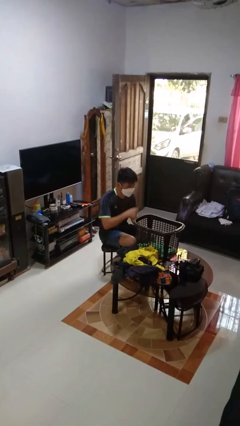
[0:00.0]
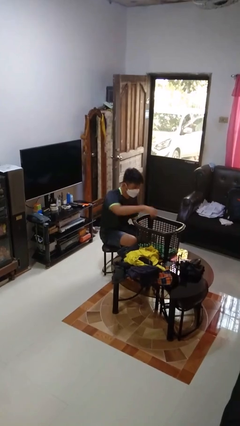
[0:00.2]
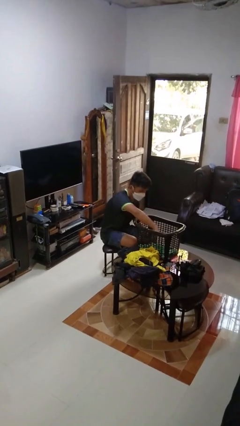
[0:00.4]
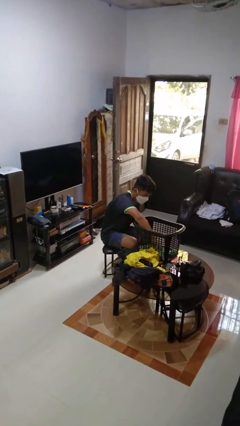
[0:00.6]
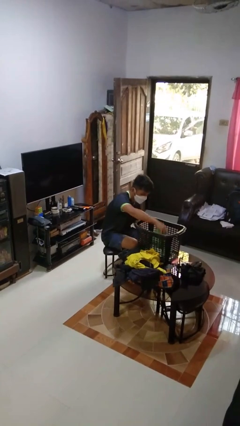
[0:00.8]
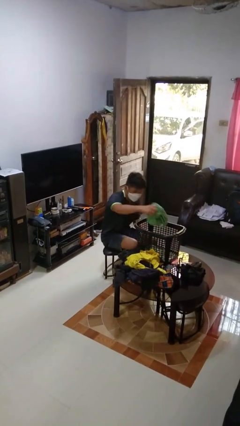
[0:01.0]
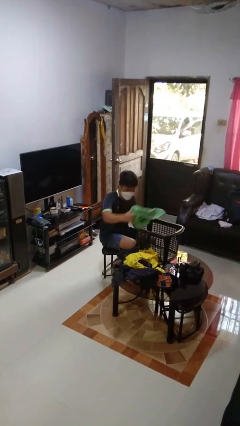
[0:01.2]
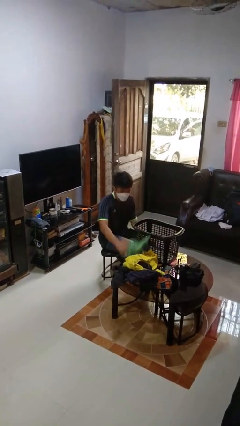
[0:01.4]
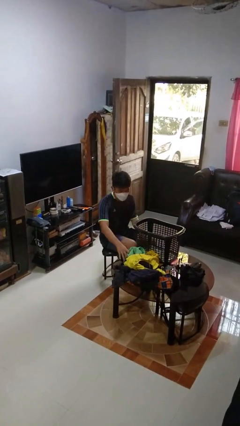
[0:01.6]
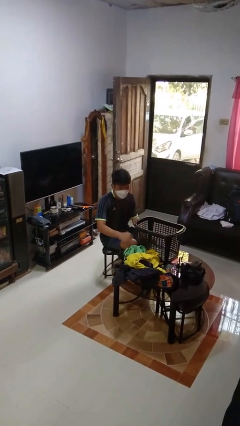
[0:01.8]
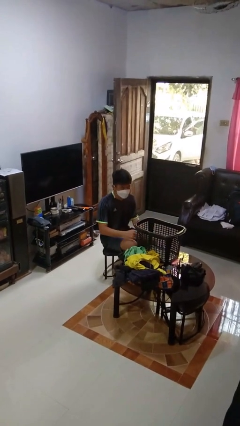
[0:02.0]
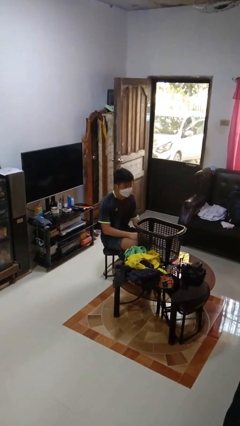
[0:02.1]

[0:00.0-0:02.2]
person takes object from basket

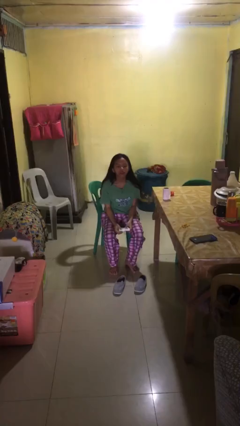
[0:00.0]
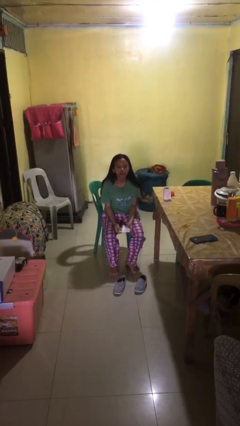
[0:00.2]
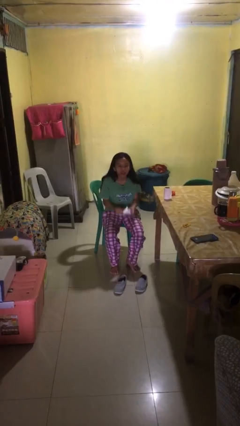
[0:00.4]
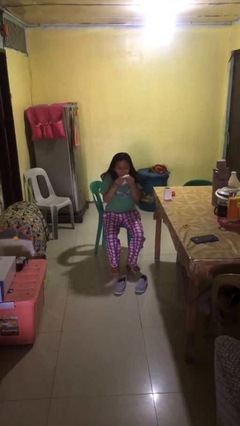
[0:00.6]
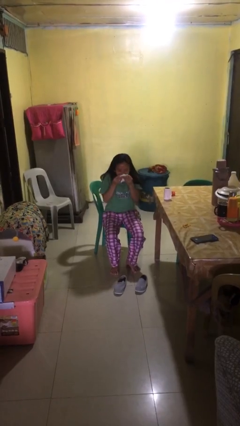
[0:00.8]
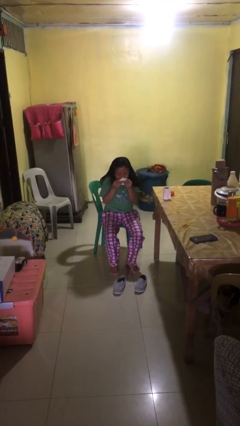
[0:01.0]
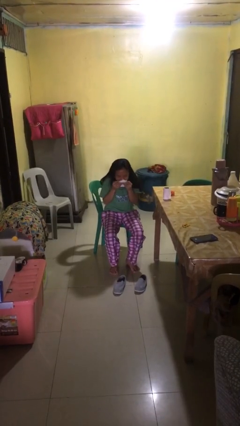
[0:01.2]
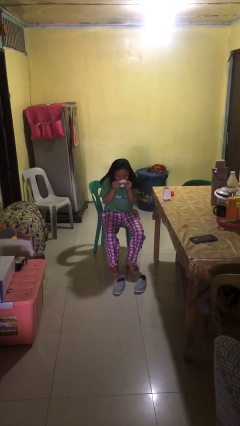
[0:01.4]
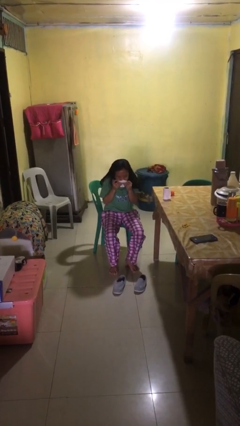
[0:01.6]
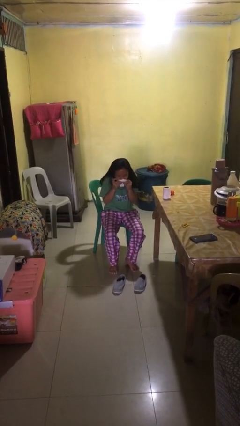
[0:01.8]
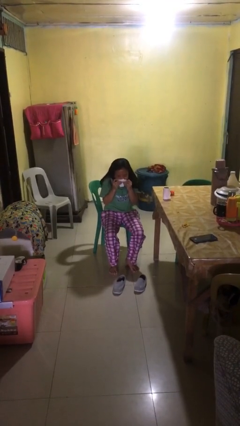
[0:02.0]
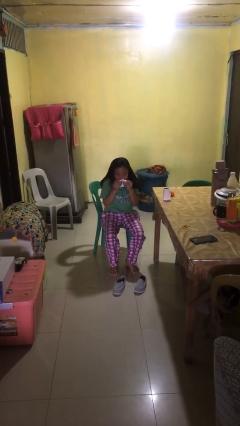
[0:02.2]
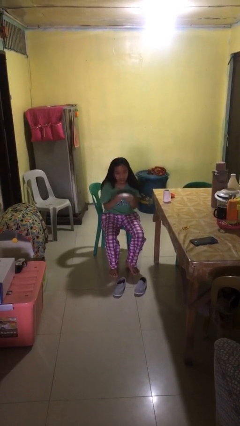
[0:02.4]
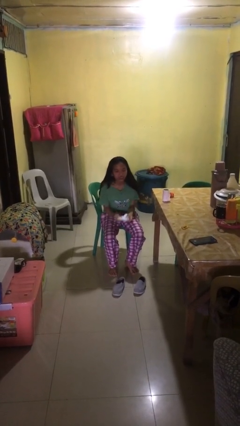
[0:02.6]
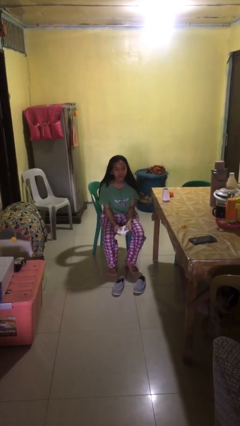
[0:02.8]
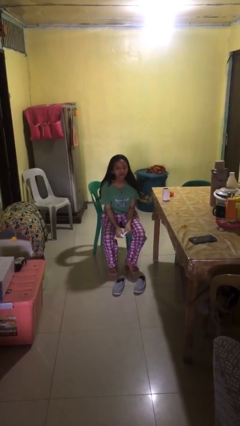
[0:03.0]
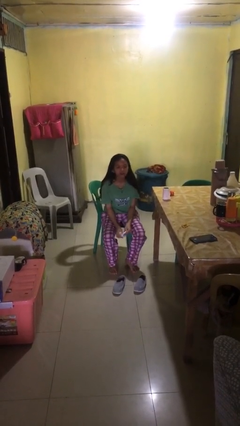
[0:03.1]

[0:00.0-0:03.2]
person blows nose

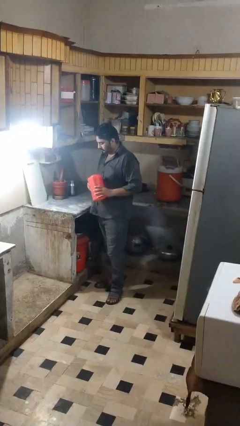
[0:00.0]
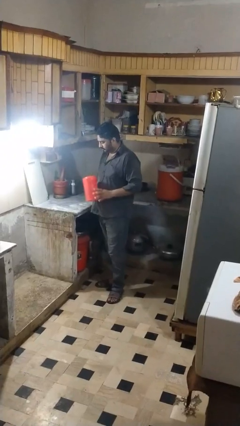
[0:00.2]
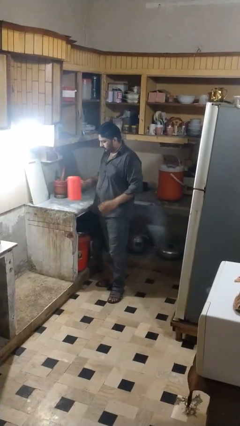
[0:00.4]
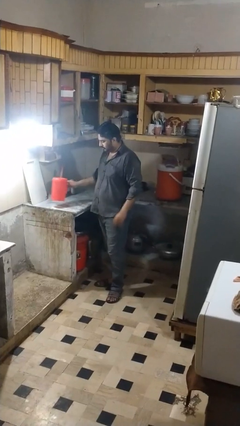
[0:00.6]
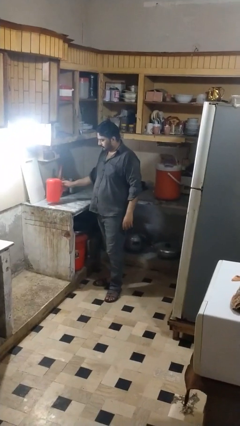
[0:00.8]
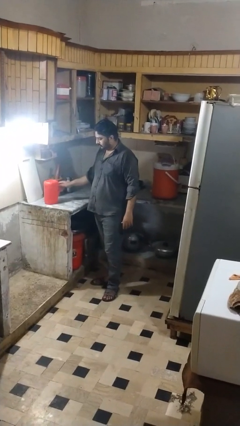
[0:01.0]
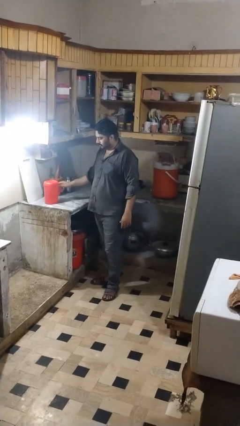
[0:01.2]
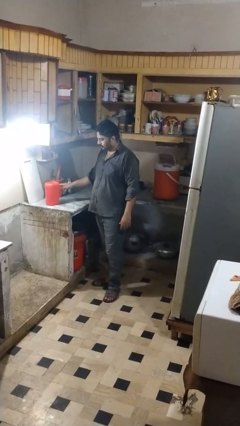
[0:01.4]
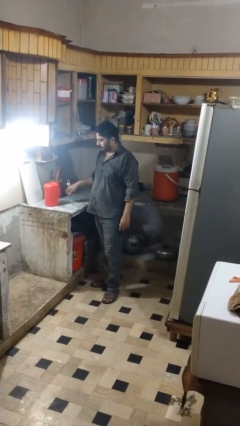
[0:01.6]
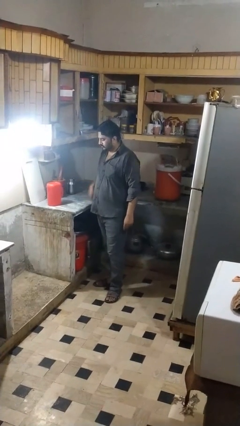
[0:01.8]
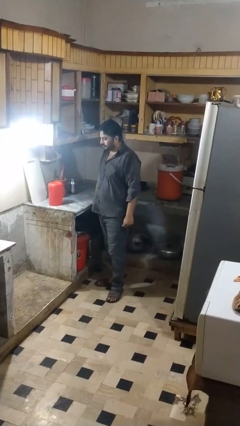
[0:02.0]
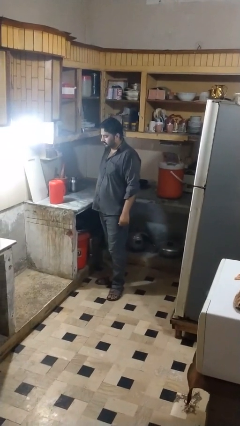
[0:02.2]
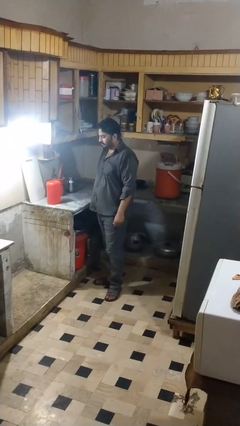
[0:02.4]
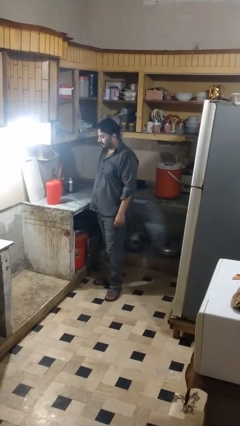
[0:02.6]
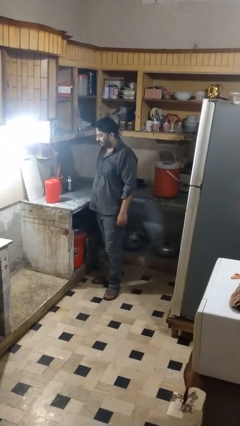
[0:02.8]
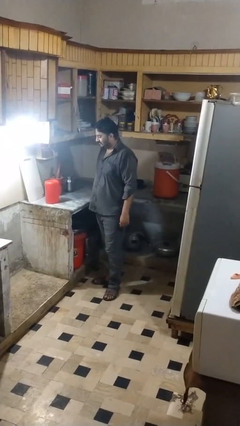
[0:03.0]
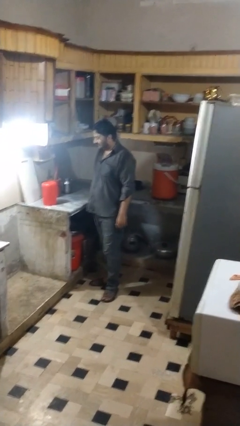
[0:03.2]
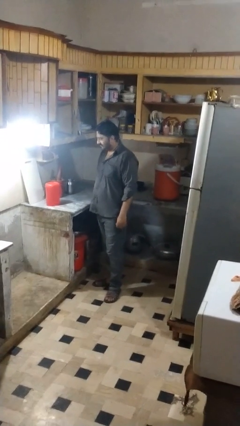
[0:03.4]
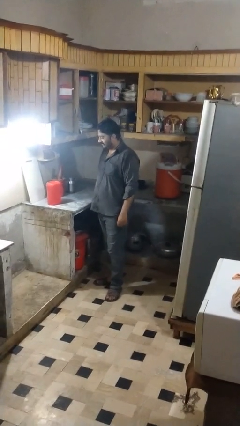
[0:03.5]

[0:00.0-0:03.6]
person puts down object on countertop

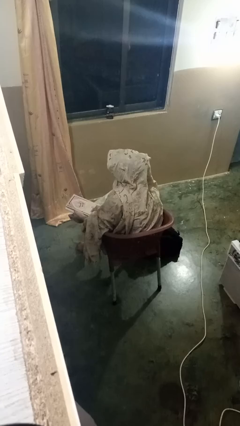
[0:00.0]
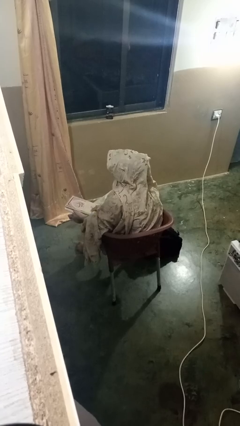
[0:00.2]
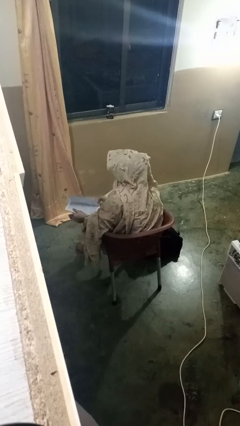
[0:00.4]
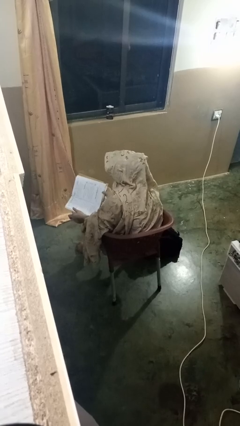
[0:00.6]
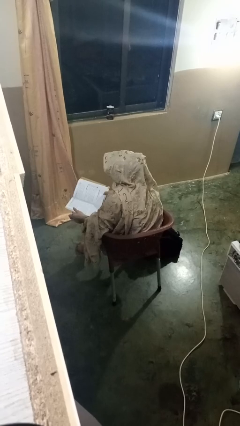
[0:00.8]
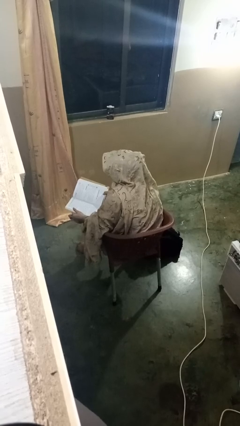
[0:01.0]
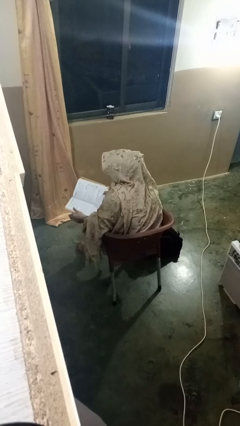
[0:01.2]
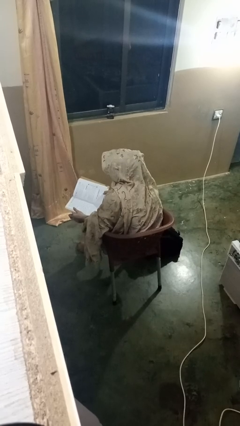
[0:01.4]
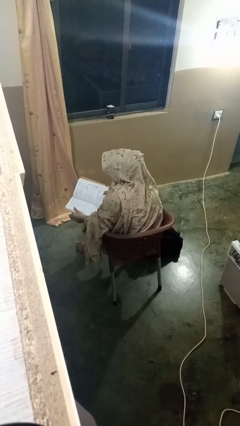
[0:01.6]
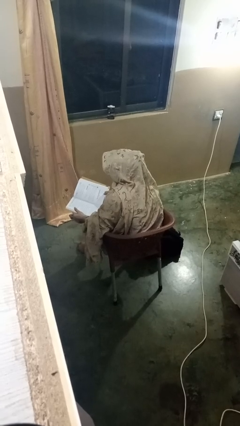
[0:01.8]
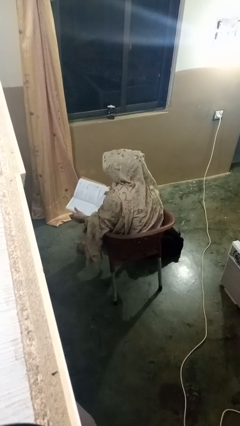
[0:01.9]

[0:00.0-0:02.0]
person reads book

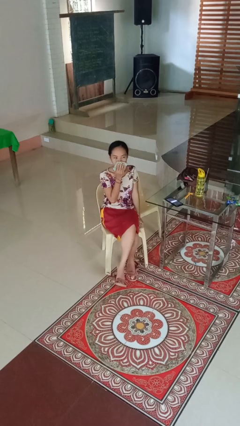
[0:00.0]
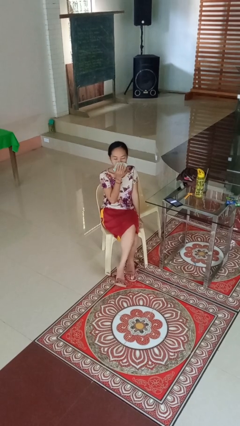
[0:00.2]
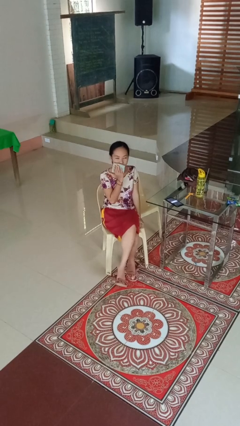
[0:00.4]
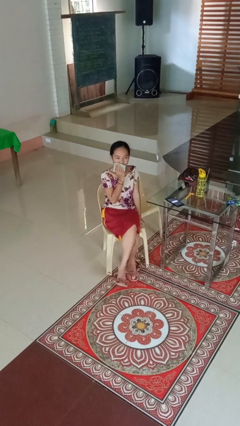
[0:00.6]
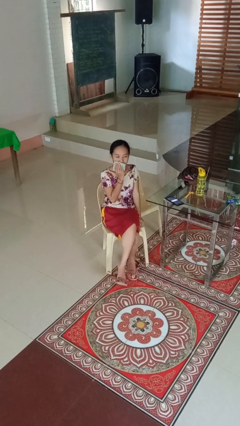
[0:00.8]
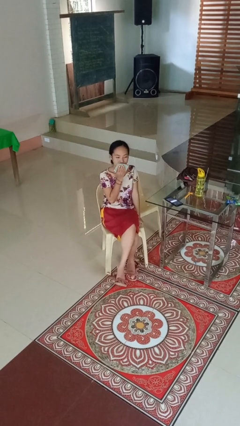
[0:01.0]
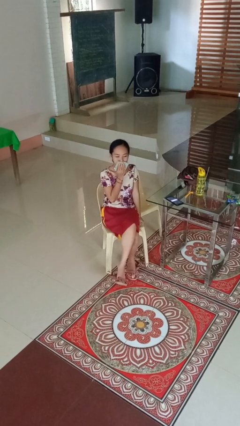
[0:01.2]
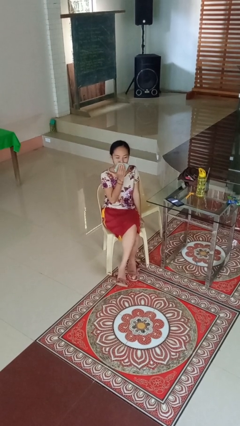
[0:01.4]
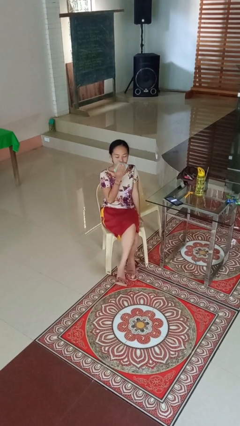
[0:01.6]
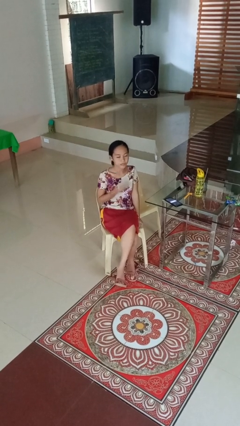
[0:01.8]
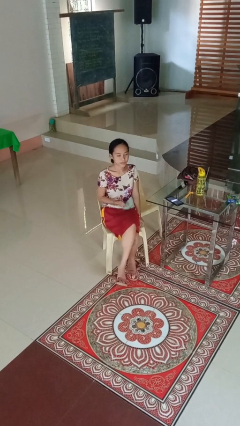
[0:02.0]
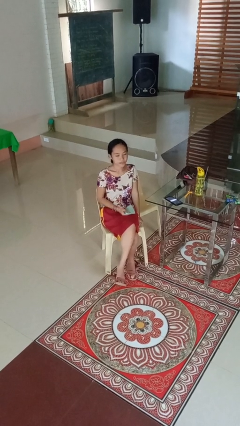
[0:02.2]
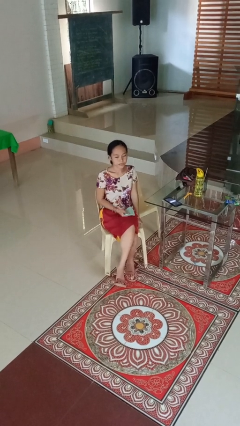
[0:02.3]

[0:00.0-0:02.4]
person wipes mouth with napkin

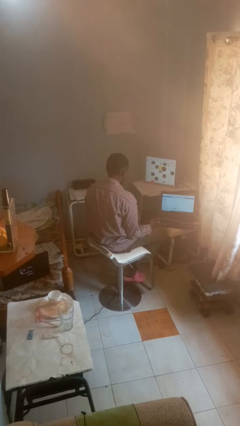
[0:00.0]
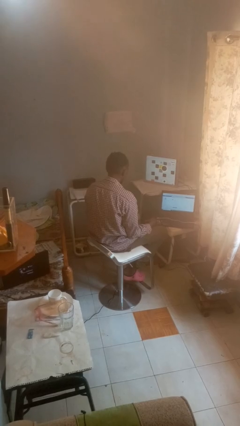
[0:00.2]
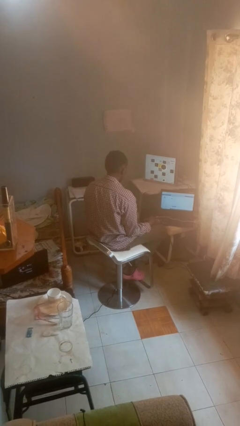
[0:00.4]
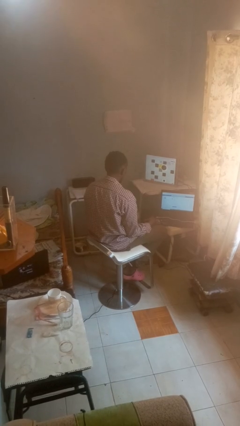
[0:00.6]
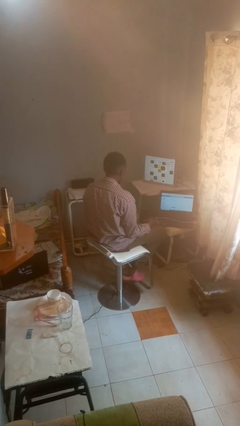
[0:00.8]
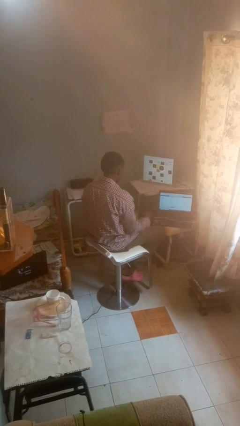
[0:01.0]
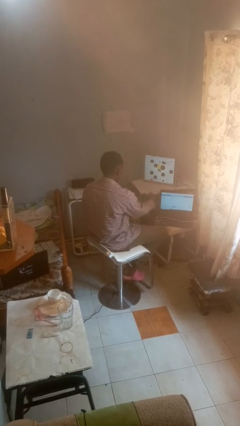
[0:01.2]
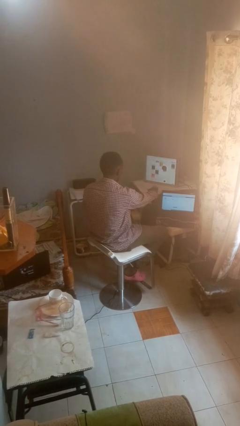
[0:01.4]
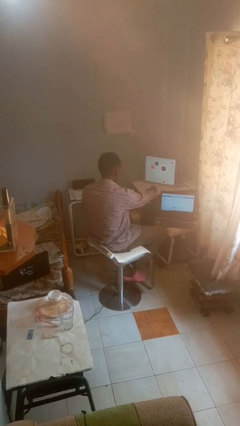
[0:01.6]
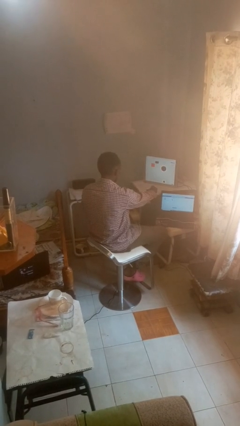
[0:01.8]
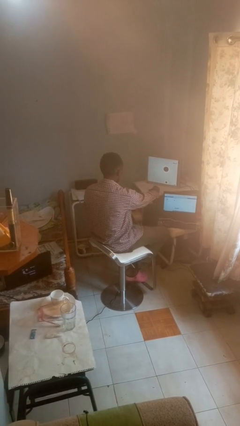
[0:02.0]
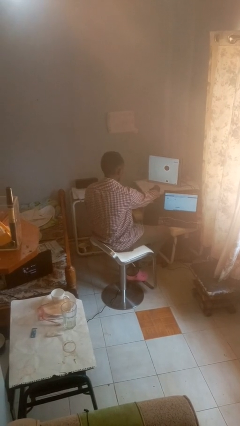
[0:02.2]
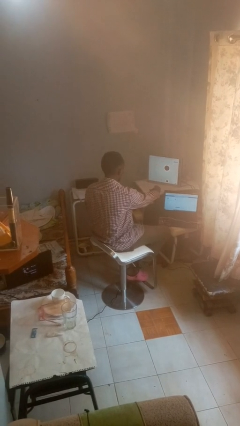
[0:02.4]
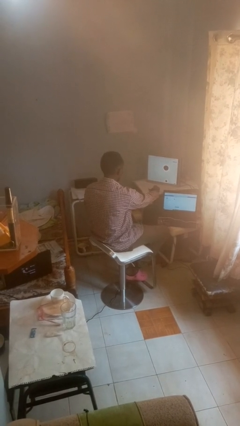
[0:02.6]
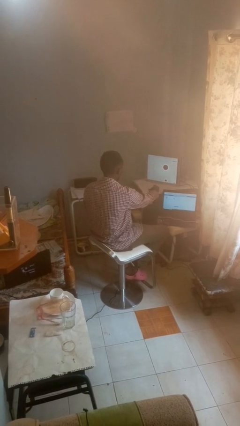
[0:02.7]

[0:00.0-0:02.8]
person uses television remote

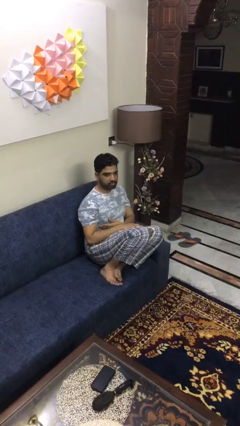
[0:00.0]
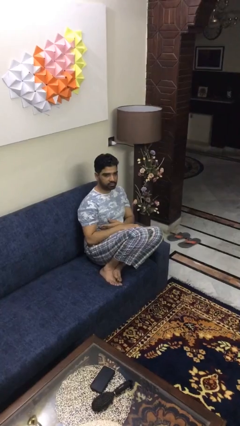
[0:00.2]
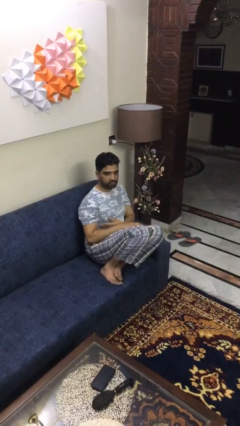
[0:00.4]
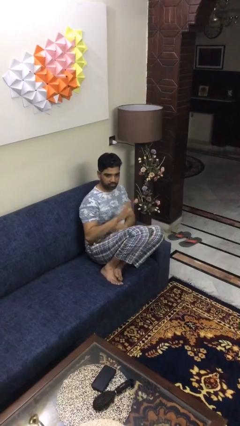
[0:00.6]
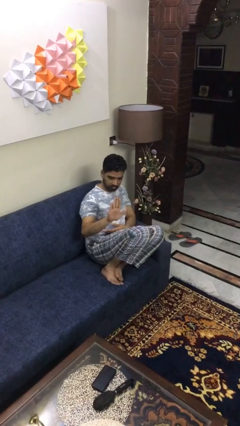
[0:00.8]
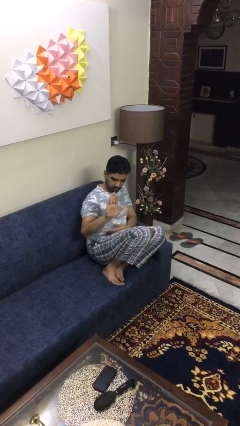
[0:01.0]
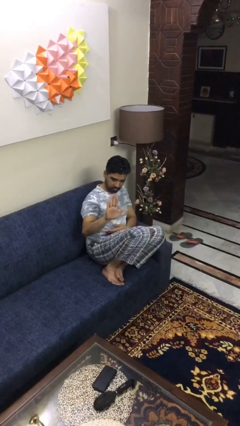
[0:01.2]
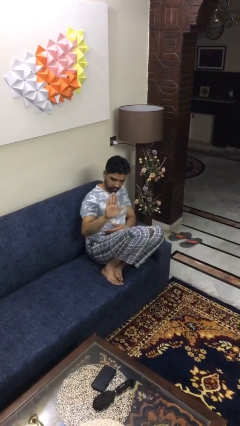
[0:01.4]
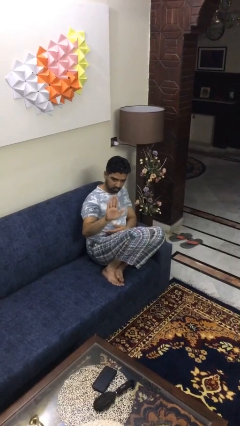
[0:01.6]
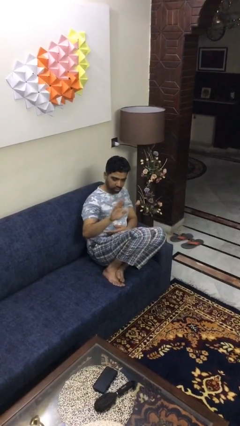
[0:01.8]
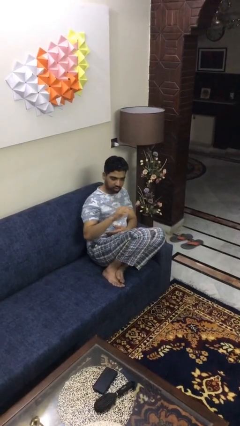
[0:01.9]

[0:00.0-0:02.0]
person gestures stop
